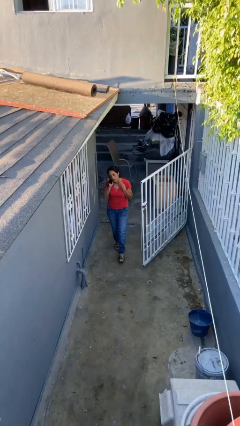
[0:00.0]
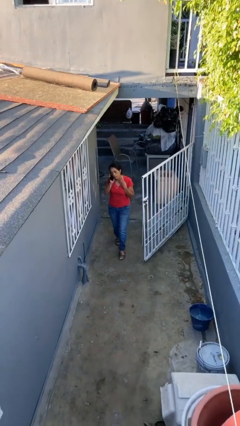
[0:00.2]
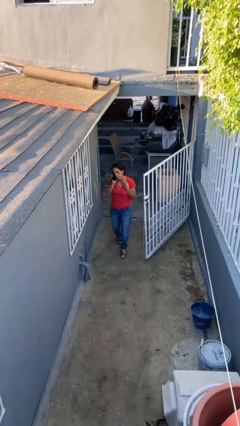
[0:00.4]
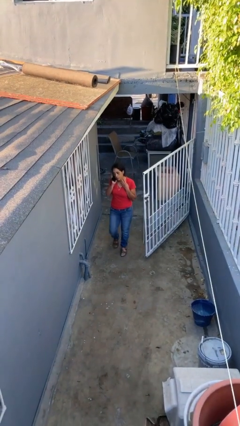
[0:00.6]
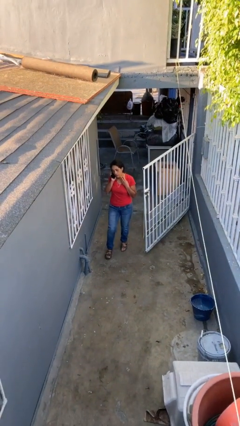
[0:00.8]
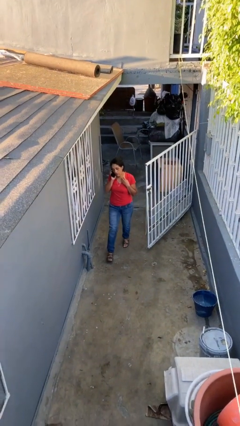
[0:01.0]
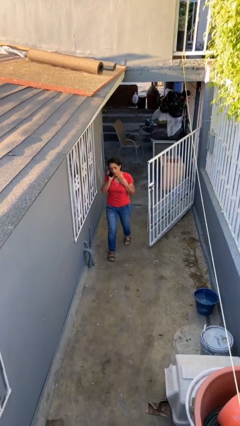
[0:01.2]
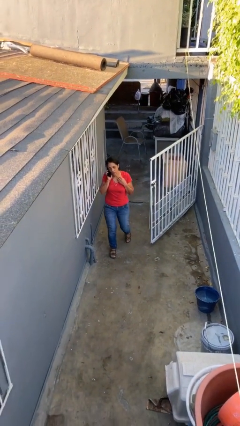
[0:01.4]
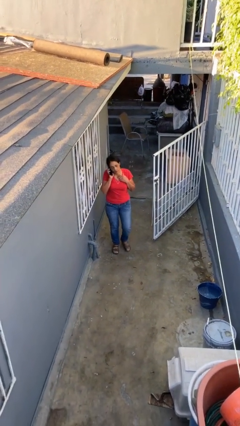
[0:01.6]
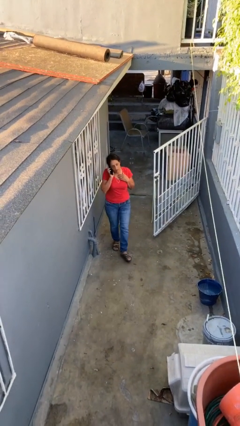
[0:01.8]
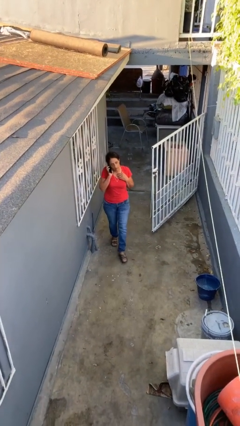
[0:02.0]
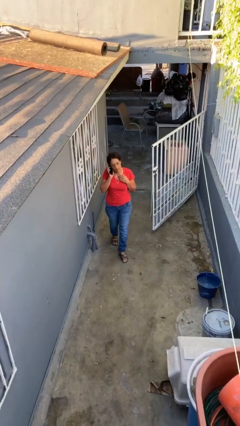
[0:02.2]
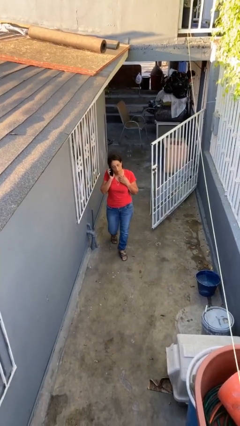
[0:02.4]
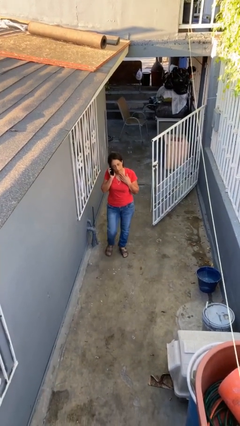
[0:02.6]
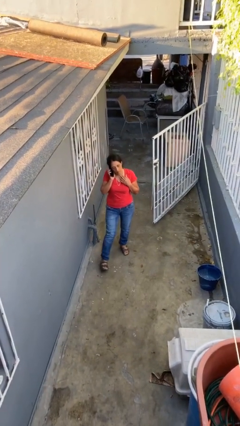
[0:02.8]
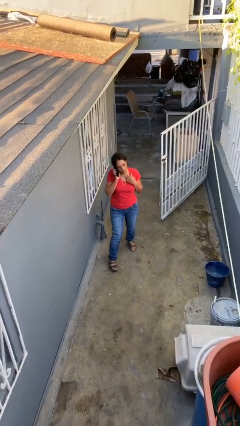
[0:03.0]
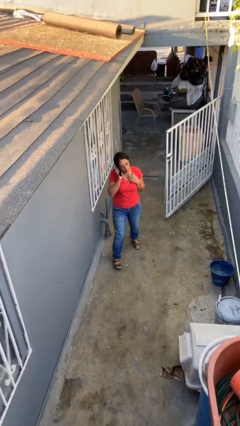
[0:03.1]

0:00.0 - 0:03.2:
person enters scene through structure

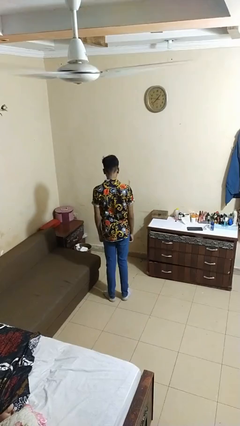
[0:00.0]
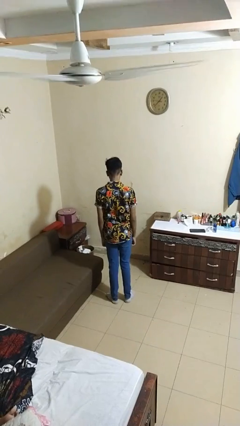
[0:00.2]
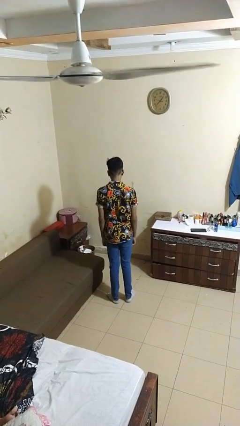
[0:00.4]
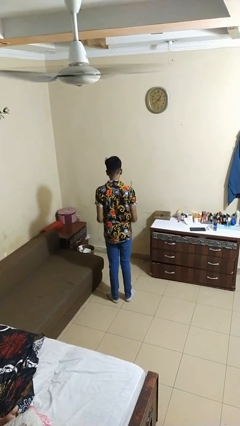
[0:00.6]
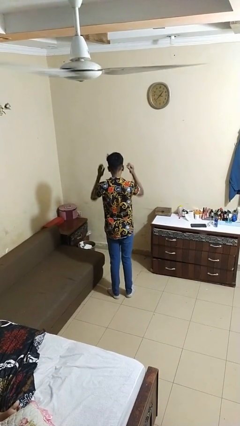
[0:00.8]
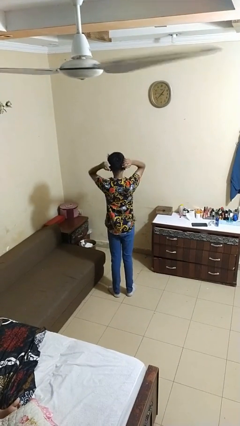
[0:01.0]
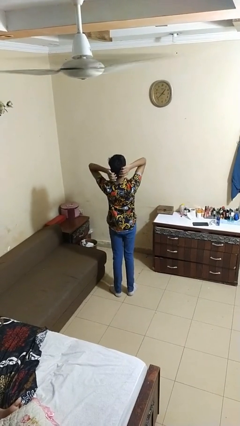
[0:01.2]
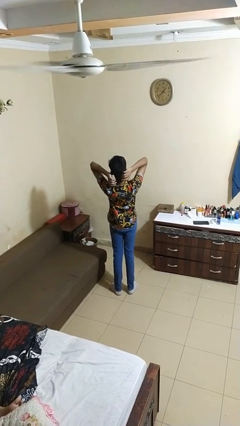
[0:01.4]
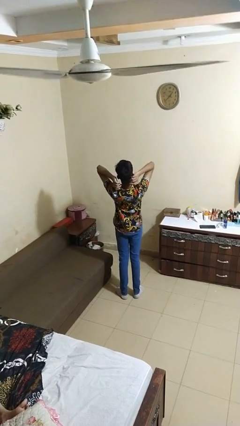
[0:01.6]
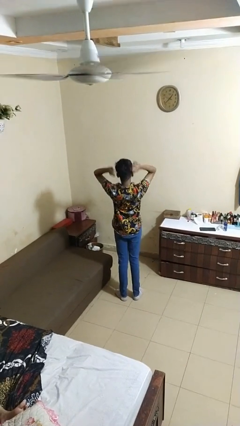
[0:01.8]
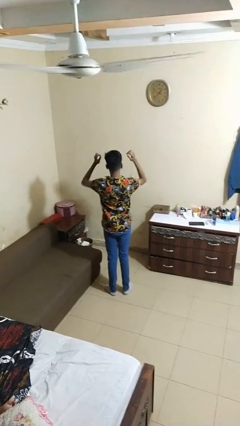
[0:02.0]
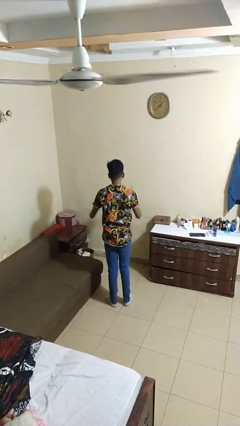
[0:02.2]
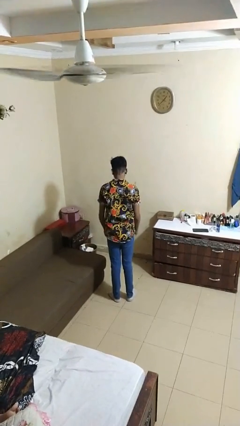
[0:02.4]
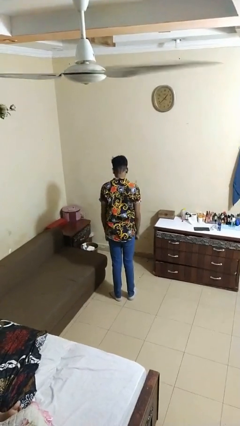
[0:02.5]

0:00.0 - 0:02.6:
person stretches arms over head

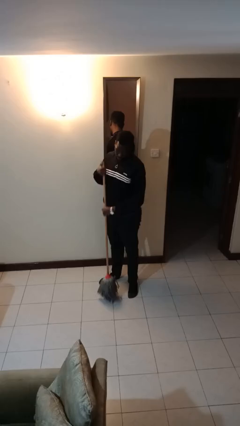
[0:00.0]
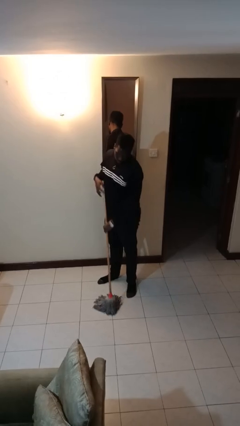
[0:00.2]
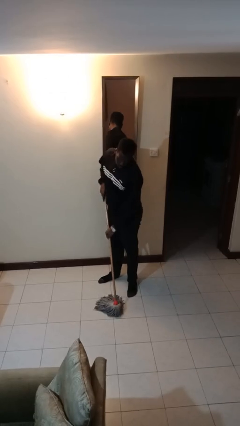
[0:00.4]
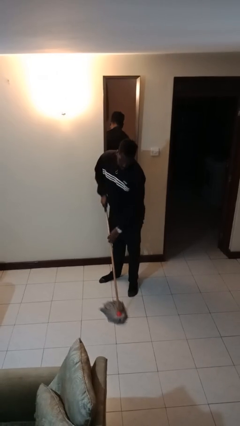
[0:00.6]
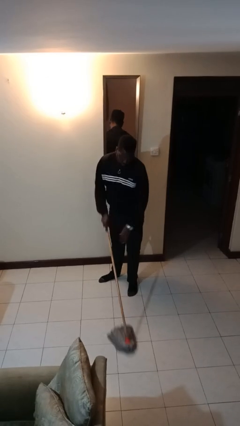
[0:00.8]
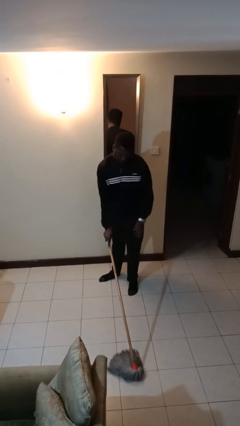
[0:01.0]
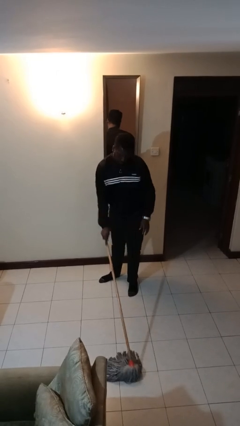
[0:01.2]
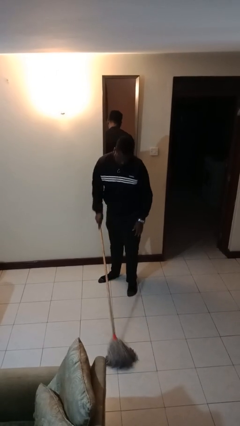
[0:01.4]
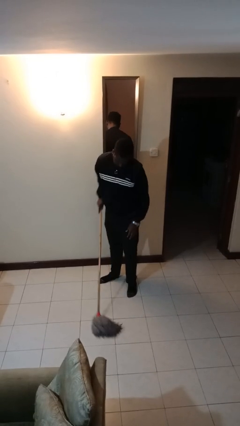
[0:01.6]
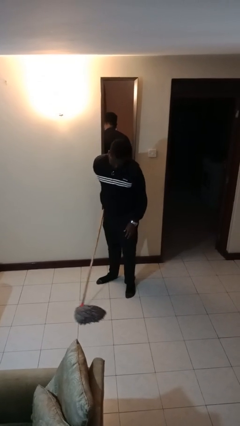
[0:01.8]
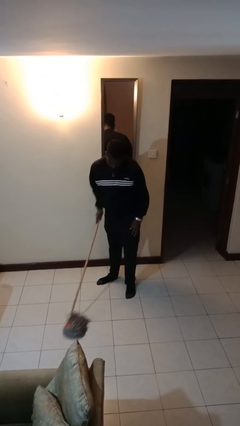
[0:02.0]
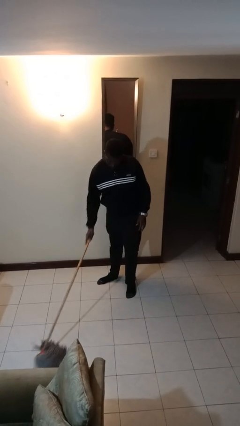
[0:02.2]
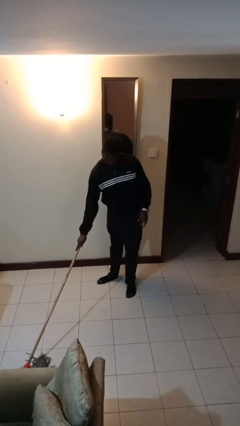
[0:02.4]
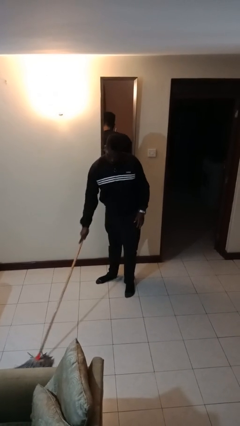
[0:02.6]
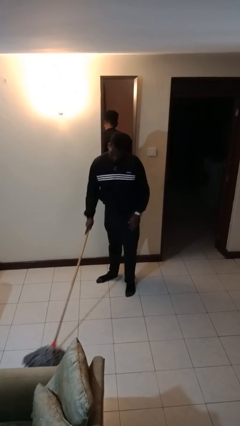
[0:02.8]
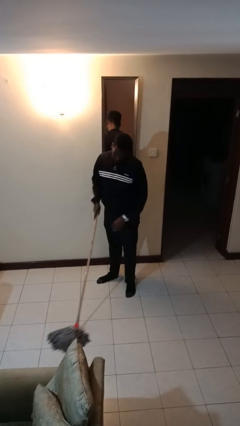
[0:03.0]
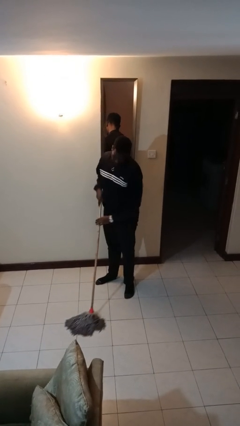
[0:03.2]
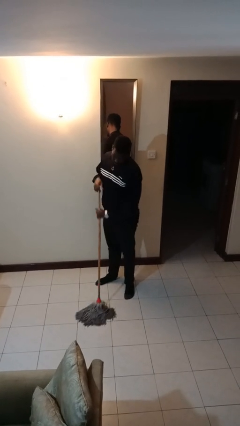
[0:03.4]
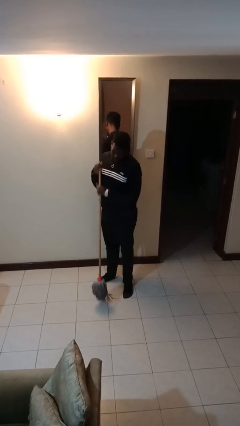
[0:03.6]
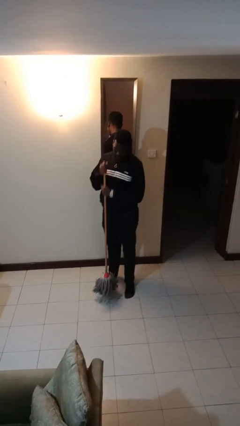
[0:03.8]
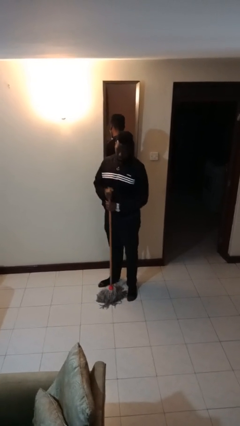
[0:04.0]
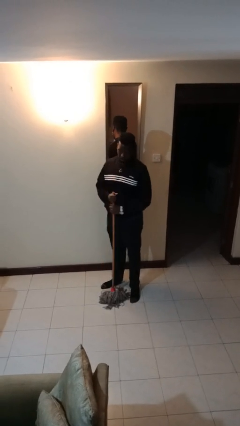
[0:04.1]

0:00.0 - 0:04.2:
person mops

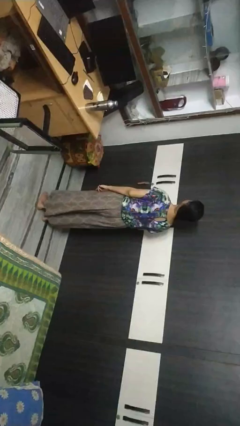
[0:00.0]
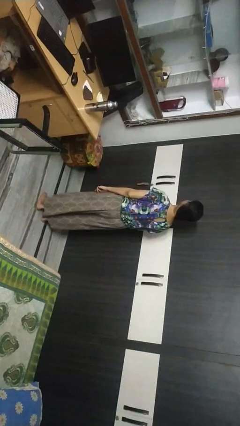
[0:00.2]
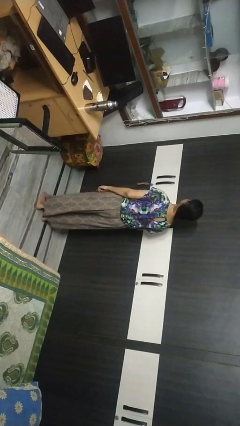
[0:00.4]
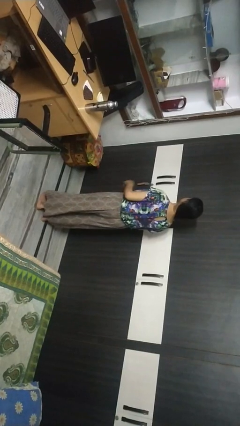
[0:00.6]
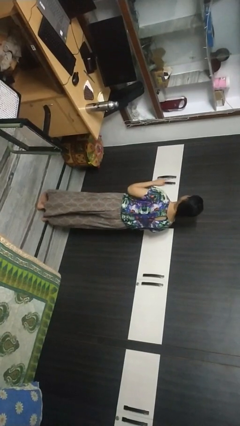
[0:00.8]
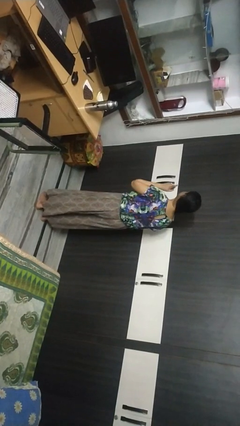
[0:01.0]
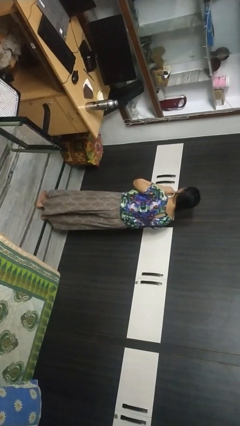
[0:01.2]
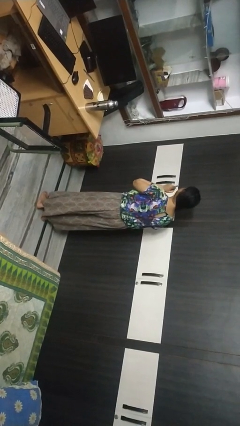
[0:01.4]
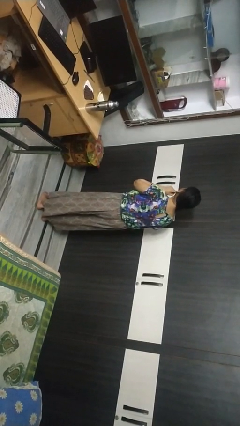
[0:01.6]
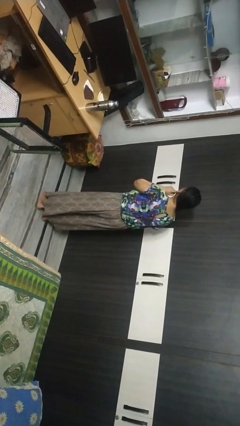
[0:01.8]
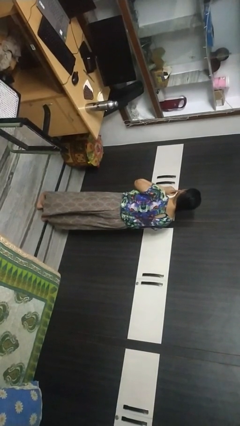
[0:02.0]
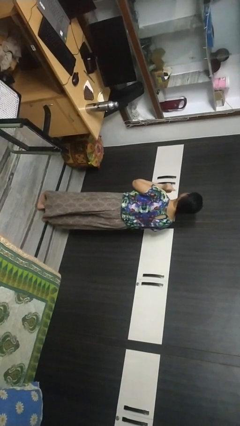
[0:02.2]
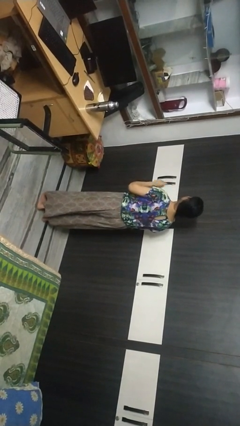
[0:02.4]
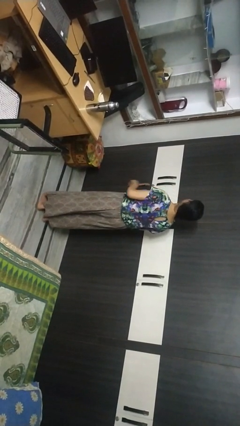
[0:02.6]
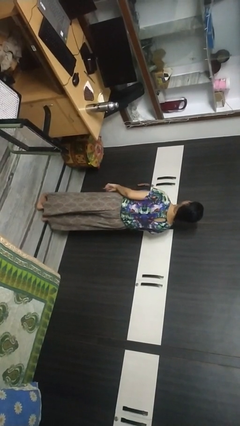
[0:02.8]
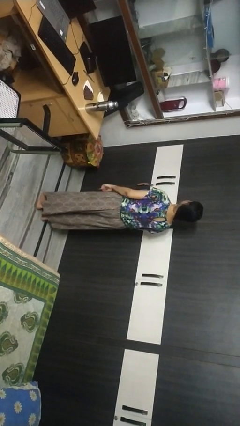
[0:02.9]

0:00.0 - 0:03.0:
person gestures listen closely

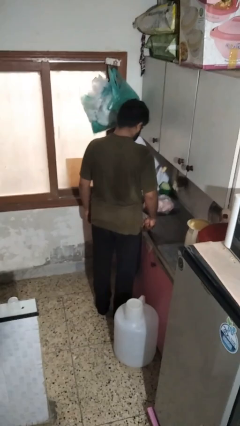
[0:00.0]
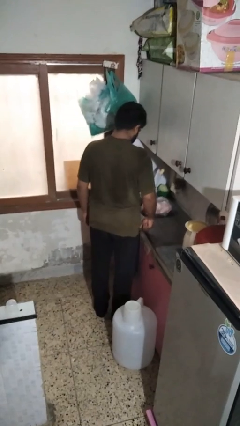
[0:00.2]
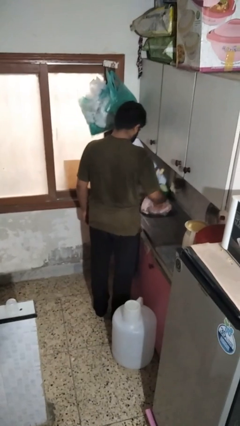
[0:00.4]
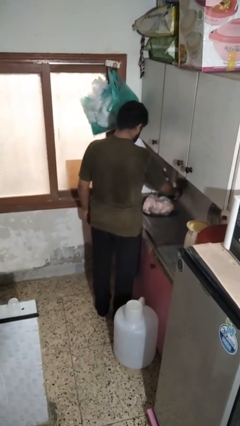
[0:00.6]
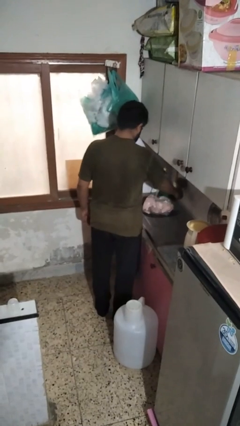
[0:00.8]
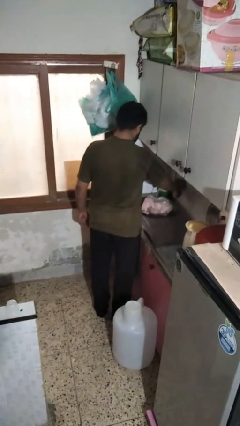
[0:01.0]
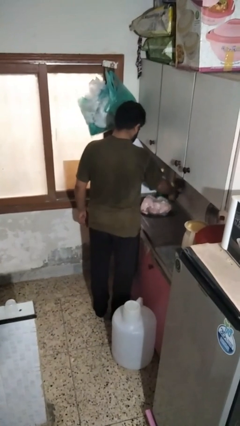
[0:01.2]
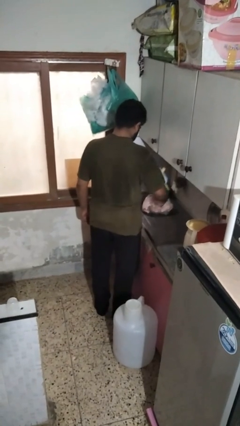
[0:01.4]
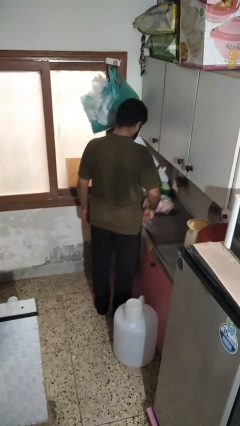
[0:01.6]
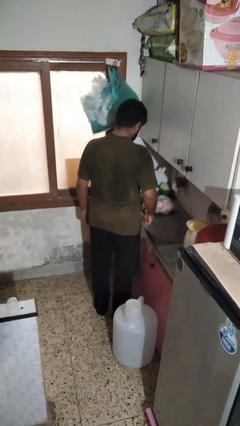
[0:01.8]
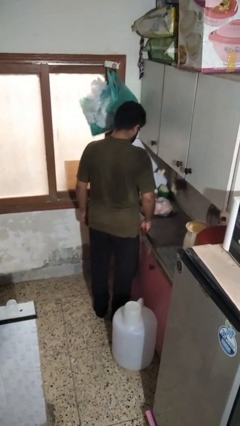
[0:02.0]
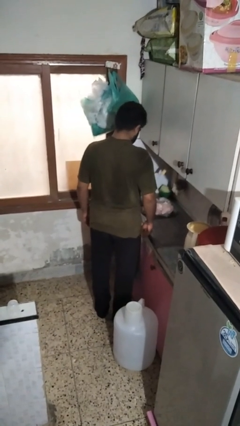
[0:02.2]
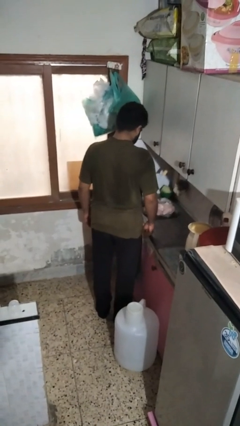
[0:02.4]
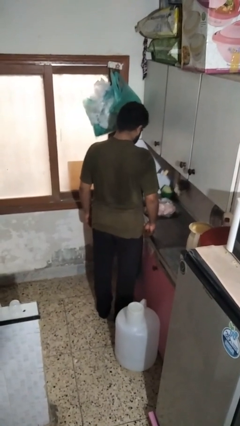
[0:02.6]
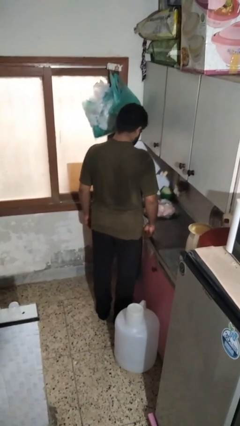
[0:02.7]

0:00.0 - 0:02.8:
person turns off faucet

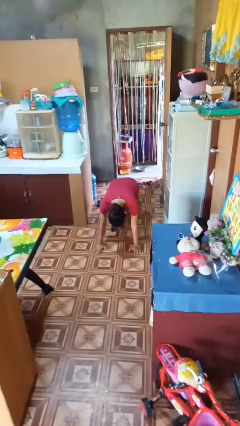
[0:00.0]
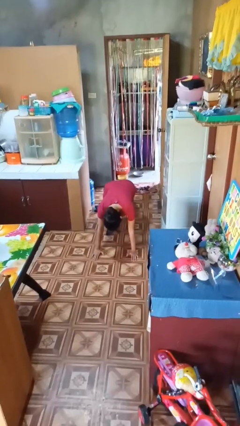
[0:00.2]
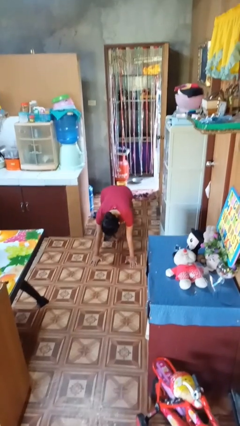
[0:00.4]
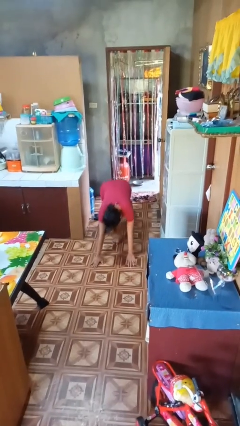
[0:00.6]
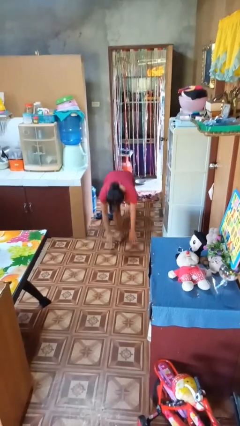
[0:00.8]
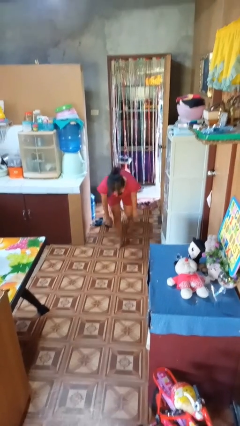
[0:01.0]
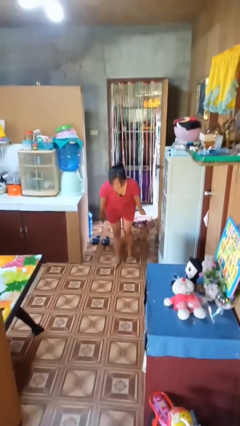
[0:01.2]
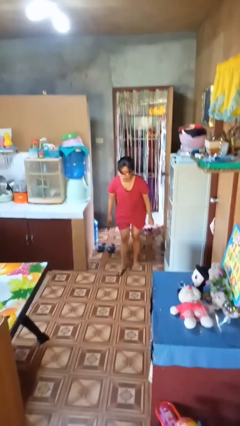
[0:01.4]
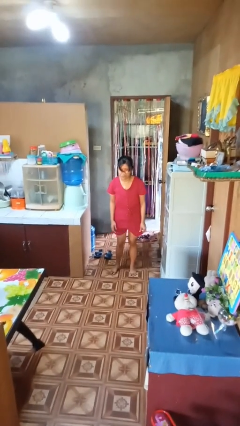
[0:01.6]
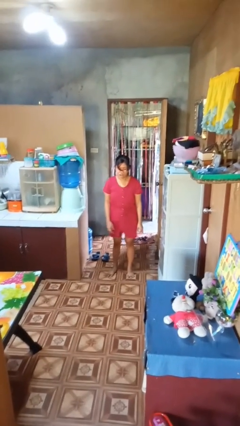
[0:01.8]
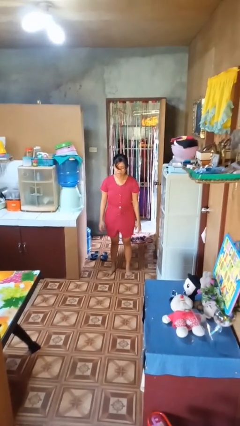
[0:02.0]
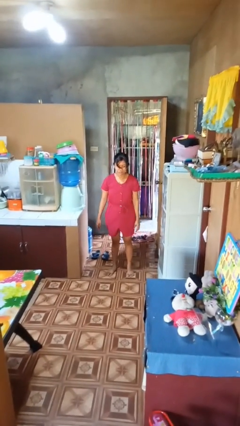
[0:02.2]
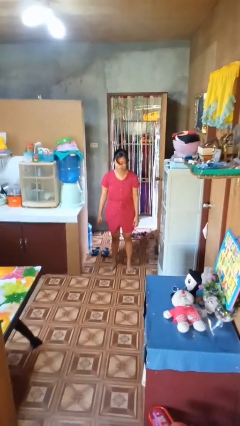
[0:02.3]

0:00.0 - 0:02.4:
person stands up from floor
